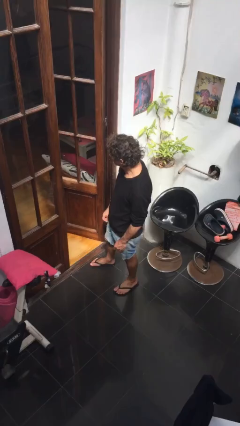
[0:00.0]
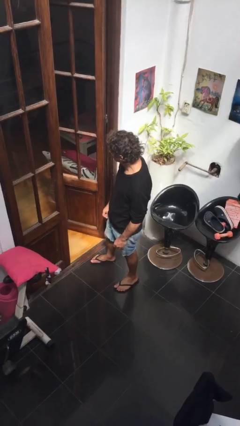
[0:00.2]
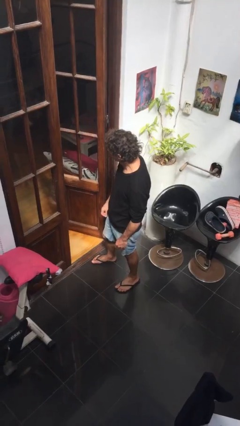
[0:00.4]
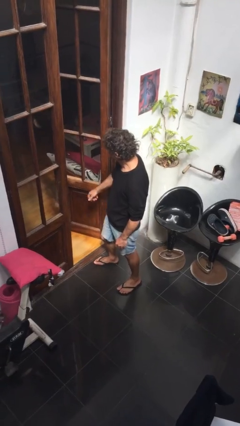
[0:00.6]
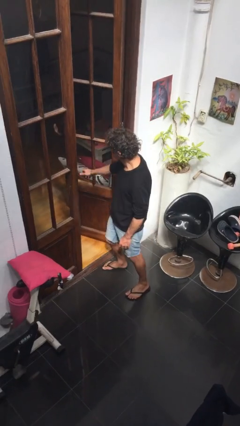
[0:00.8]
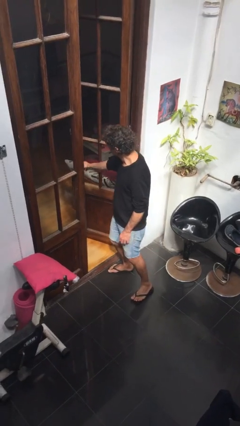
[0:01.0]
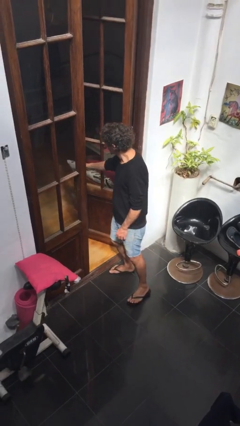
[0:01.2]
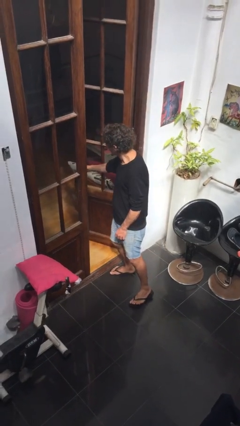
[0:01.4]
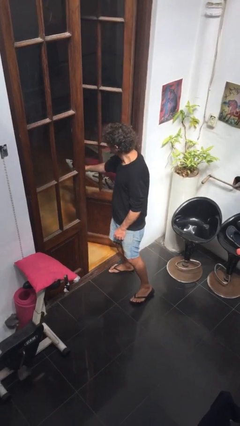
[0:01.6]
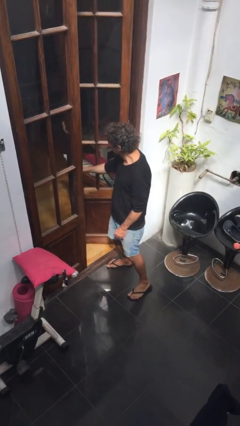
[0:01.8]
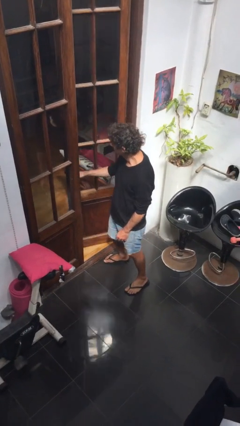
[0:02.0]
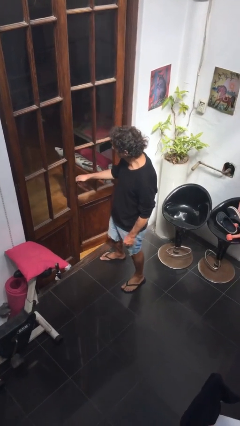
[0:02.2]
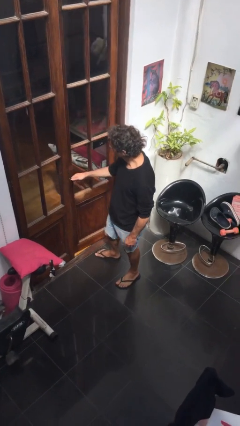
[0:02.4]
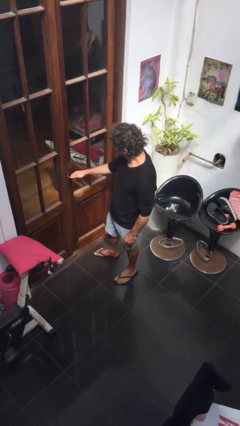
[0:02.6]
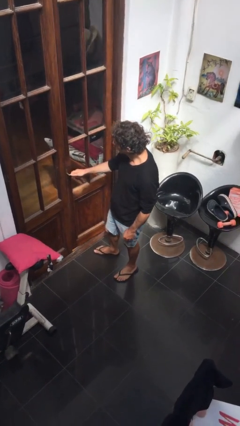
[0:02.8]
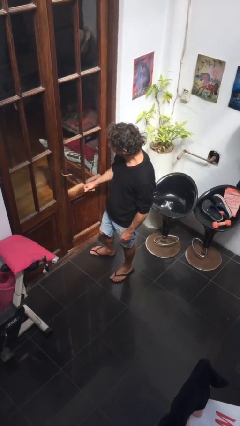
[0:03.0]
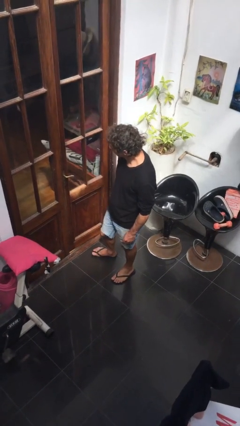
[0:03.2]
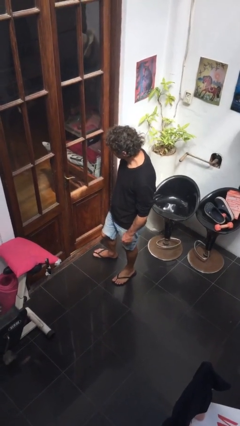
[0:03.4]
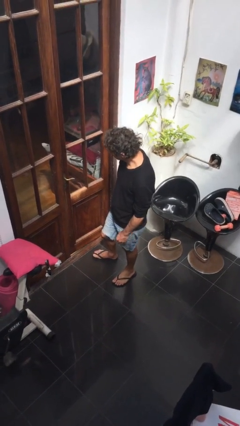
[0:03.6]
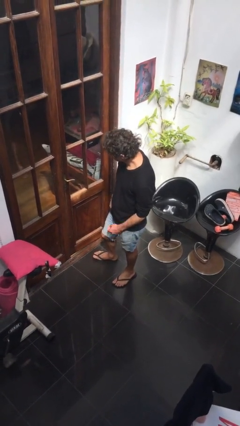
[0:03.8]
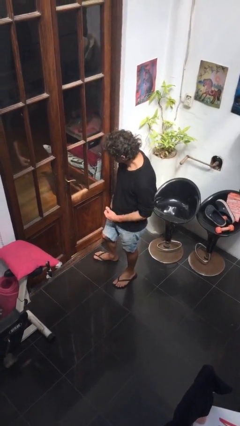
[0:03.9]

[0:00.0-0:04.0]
person closes facility door

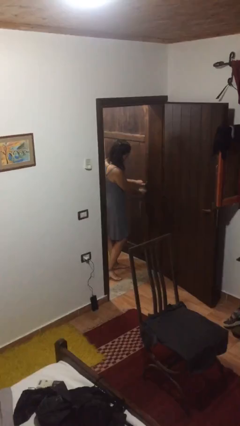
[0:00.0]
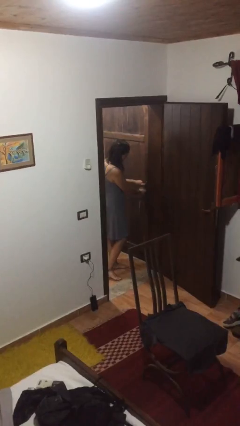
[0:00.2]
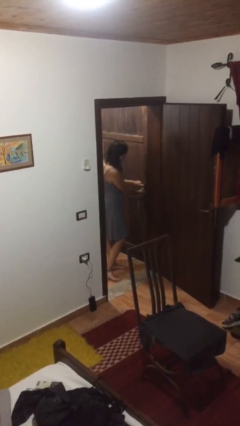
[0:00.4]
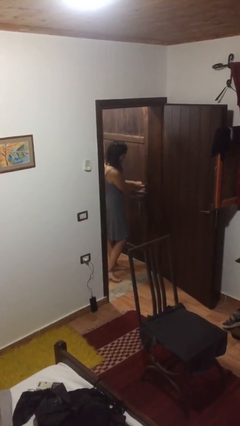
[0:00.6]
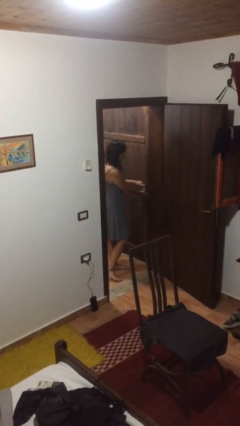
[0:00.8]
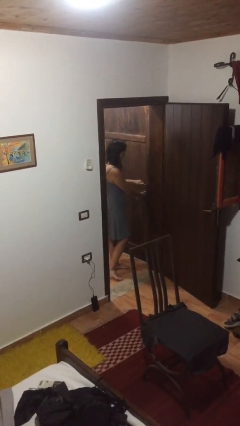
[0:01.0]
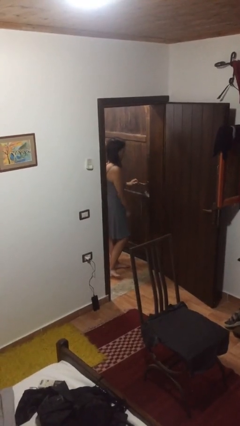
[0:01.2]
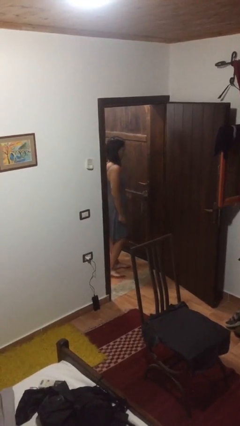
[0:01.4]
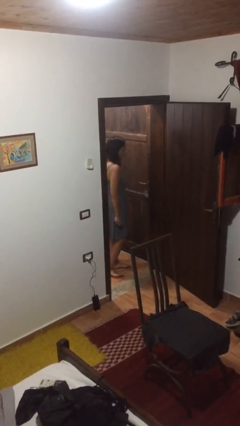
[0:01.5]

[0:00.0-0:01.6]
person locks door with keys

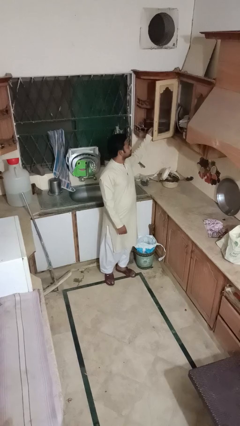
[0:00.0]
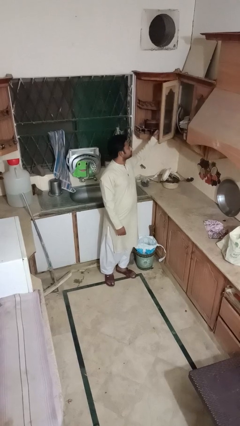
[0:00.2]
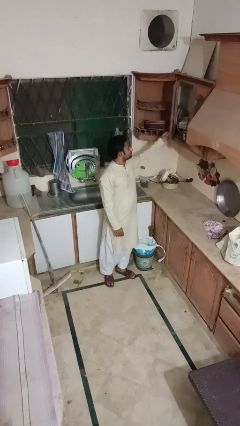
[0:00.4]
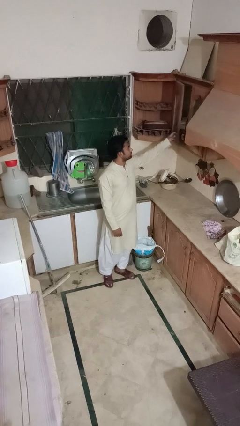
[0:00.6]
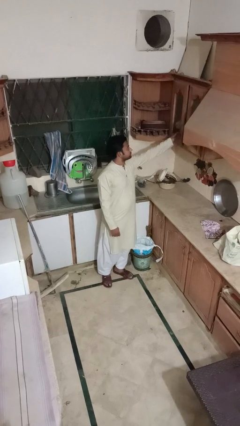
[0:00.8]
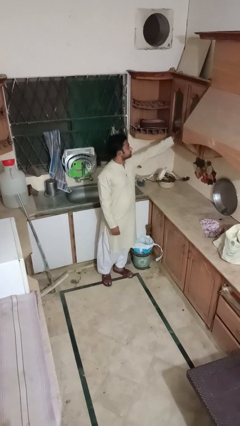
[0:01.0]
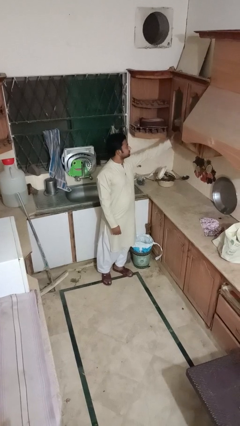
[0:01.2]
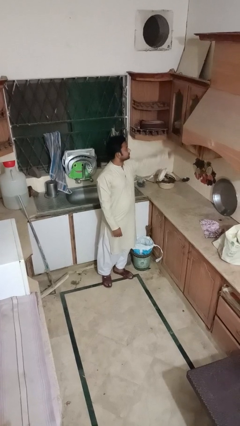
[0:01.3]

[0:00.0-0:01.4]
person closes cabinet

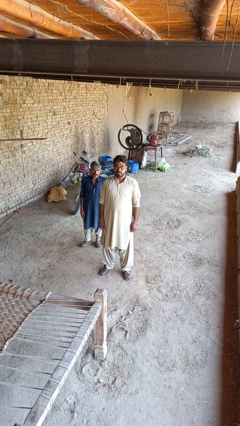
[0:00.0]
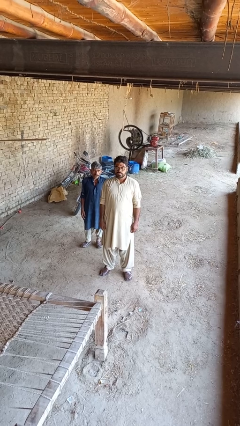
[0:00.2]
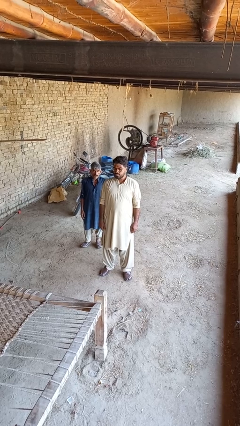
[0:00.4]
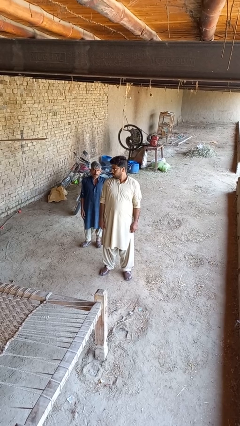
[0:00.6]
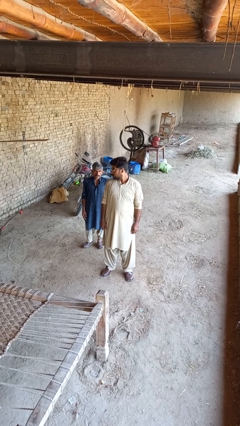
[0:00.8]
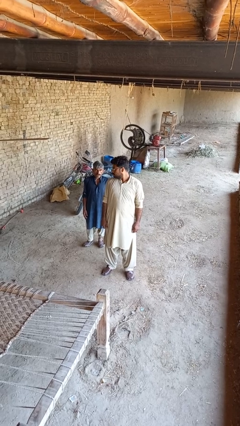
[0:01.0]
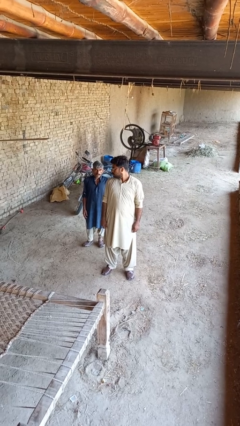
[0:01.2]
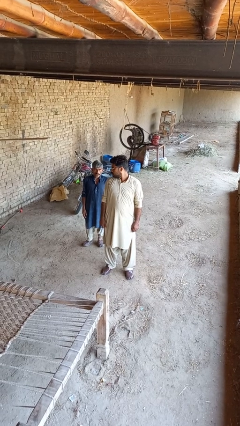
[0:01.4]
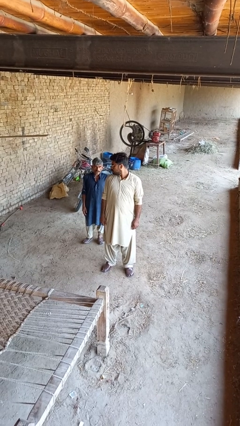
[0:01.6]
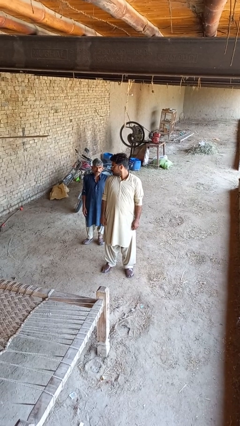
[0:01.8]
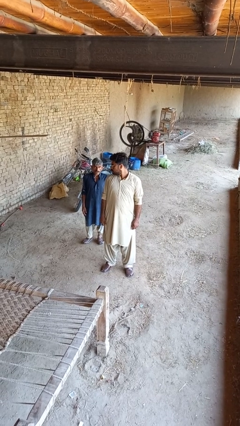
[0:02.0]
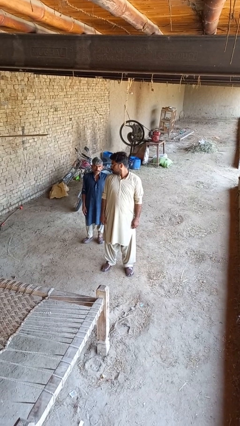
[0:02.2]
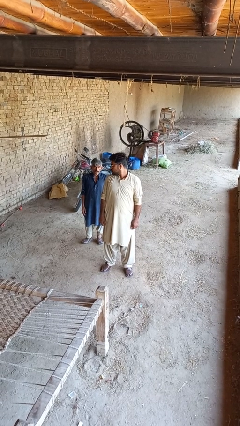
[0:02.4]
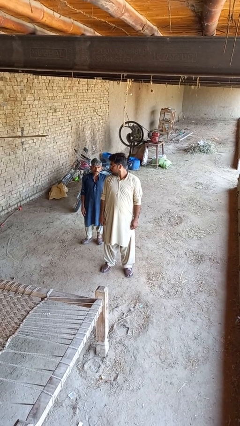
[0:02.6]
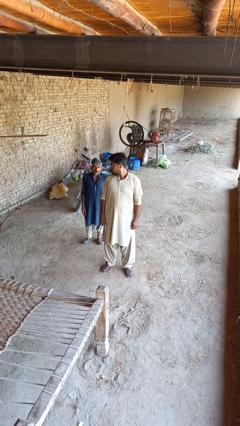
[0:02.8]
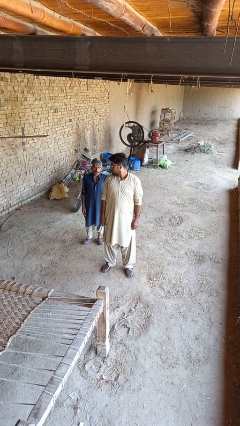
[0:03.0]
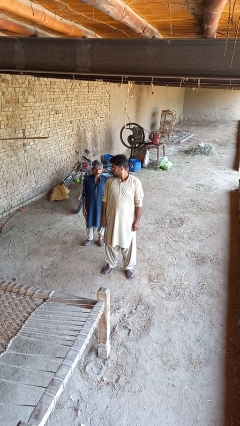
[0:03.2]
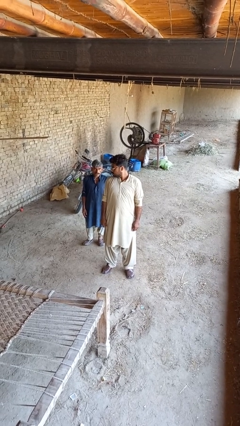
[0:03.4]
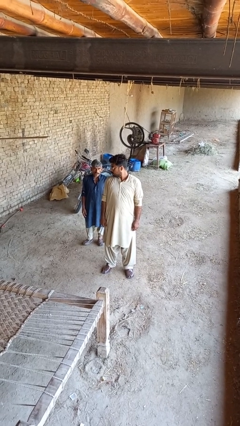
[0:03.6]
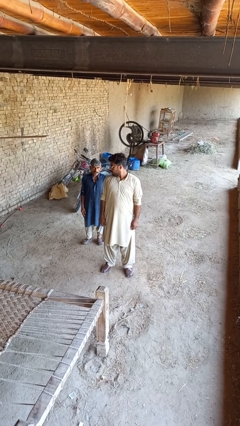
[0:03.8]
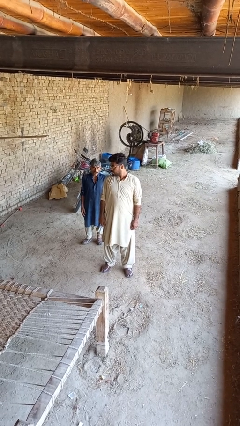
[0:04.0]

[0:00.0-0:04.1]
person looks over shoulder

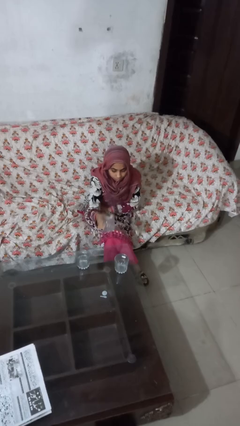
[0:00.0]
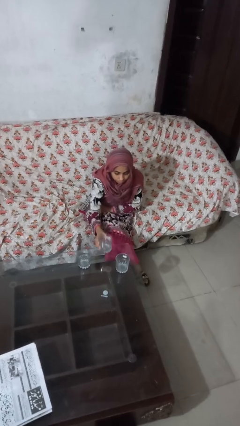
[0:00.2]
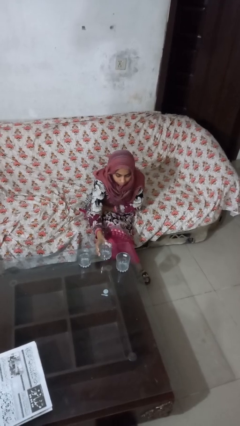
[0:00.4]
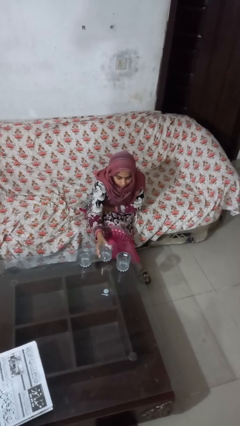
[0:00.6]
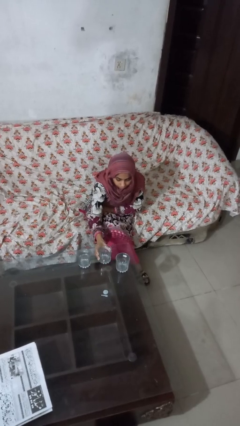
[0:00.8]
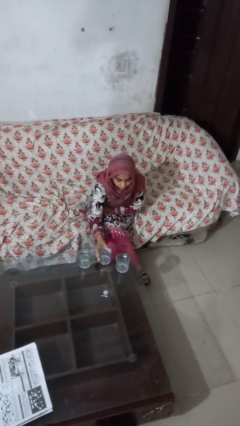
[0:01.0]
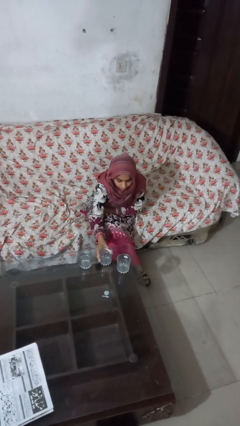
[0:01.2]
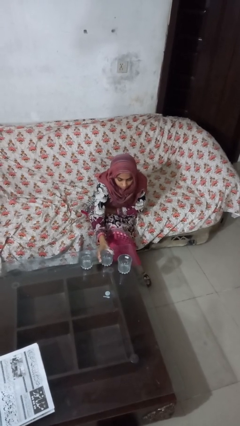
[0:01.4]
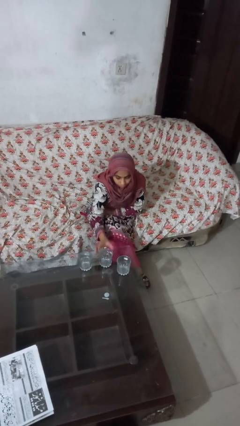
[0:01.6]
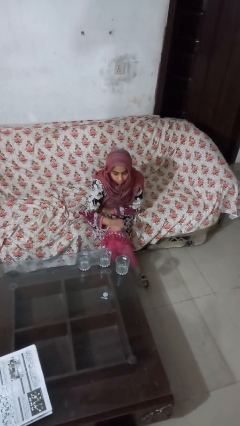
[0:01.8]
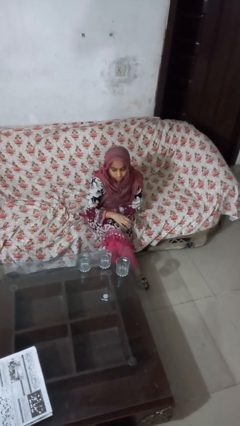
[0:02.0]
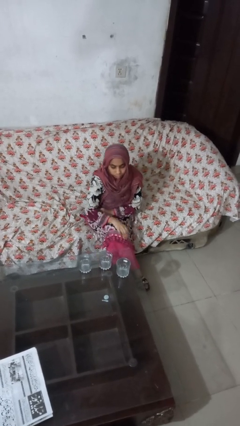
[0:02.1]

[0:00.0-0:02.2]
person puts down object on table

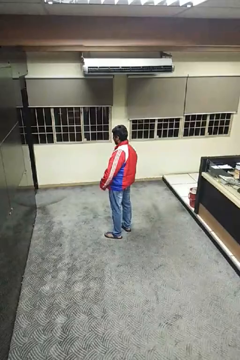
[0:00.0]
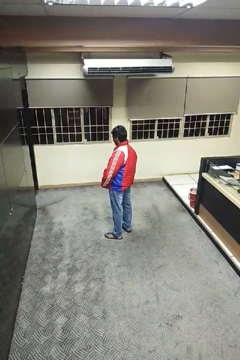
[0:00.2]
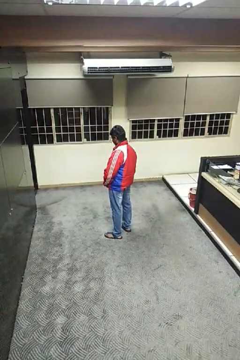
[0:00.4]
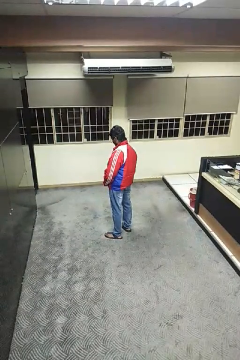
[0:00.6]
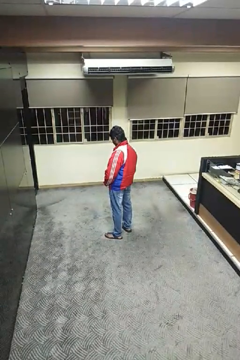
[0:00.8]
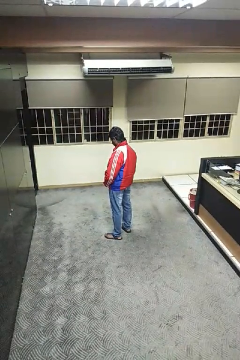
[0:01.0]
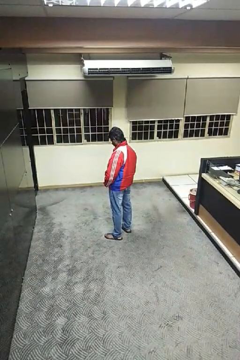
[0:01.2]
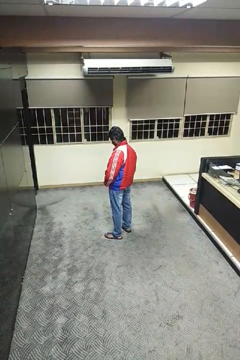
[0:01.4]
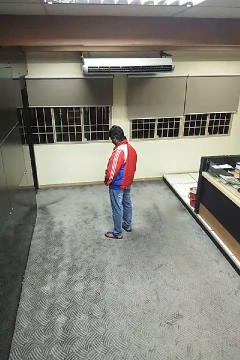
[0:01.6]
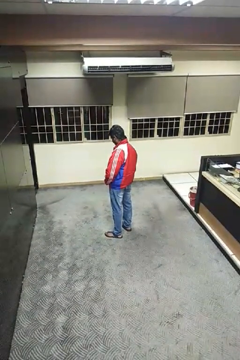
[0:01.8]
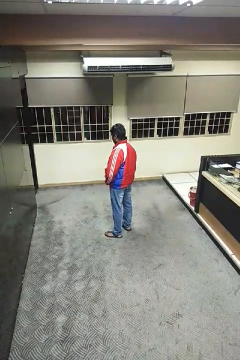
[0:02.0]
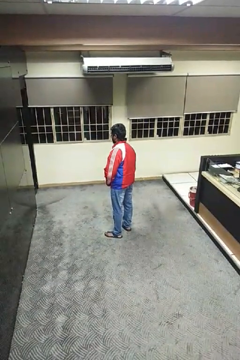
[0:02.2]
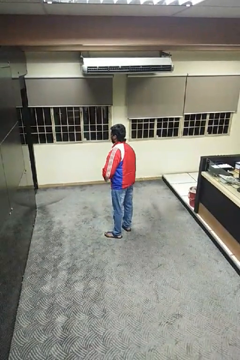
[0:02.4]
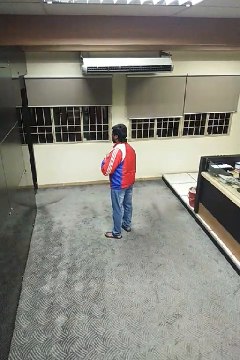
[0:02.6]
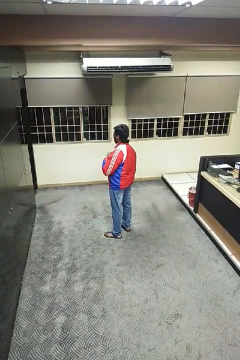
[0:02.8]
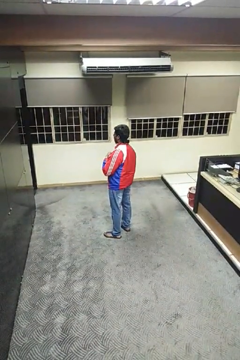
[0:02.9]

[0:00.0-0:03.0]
person zips up jacket

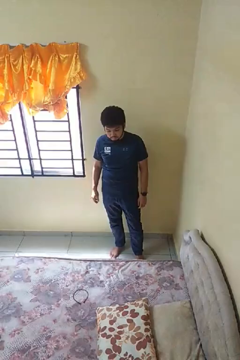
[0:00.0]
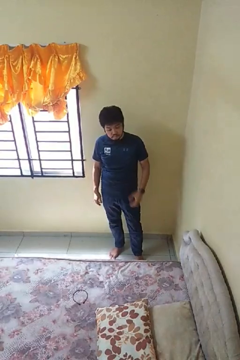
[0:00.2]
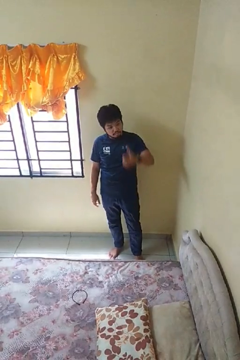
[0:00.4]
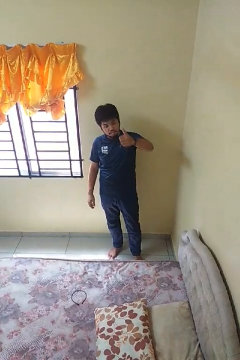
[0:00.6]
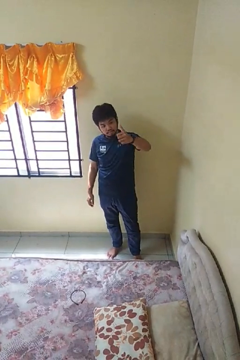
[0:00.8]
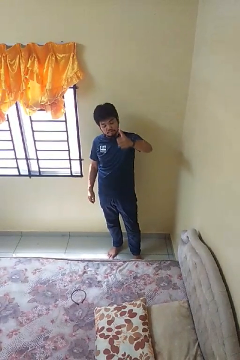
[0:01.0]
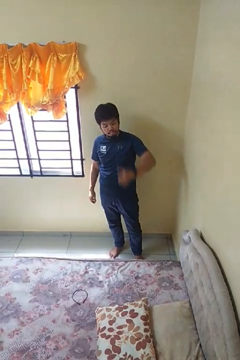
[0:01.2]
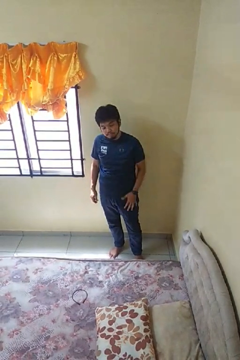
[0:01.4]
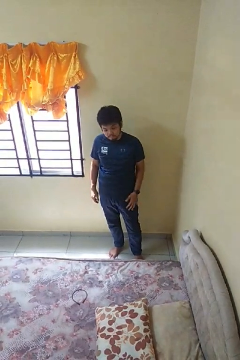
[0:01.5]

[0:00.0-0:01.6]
person gestures thumbs up
